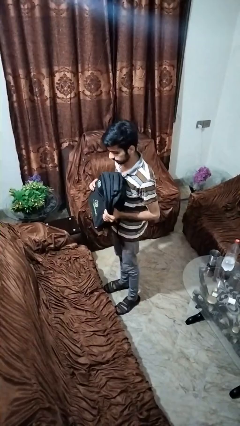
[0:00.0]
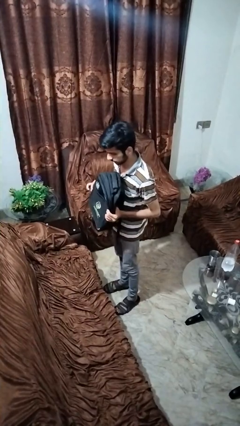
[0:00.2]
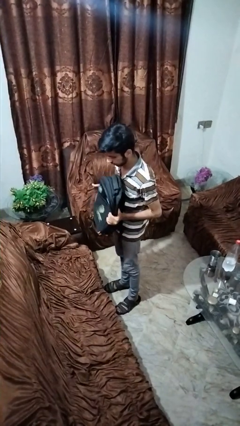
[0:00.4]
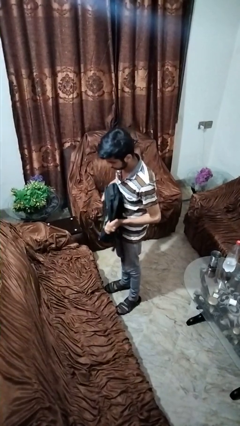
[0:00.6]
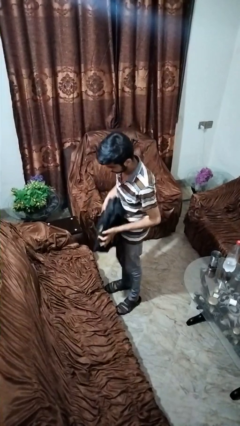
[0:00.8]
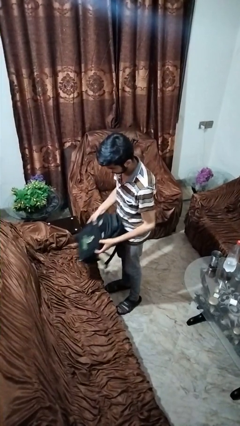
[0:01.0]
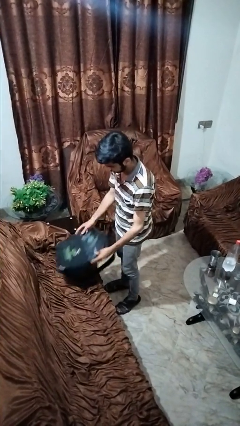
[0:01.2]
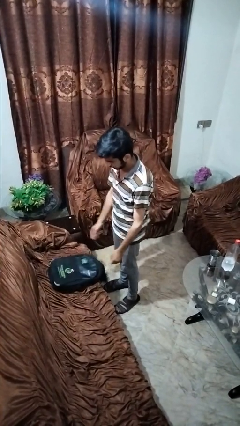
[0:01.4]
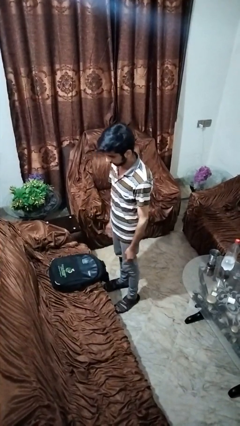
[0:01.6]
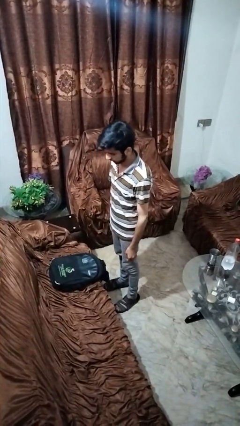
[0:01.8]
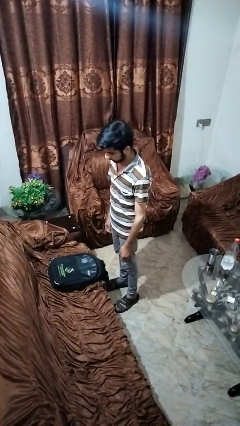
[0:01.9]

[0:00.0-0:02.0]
person puts down object on couch

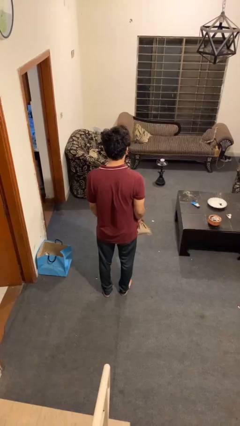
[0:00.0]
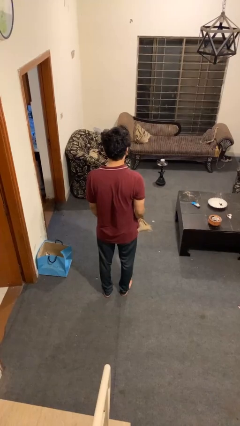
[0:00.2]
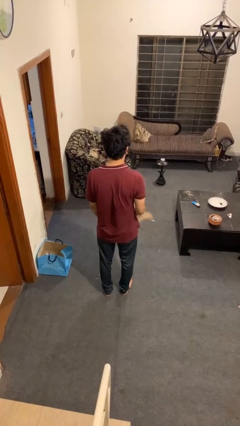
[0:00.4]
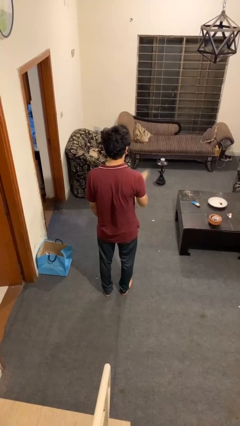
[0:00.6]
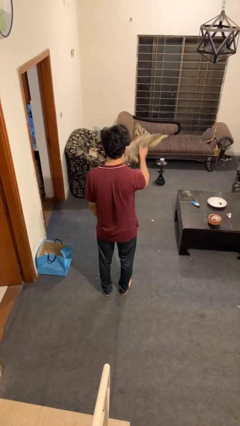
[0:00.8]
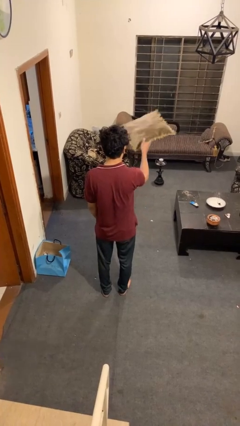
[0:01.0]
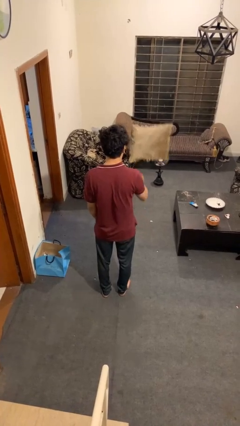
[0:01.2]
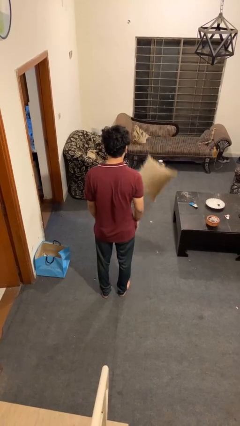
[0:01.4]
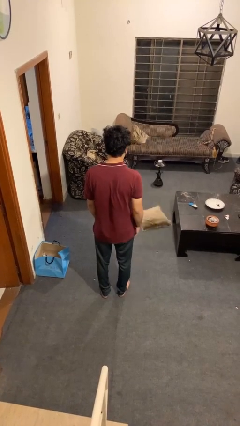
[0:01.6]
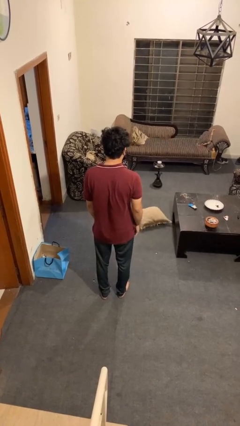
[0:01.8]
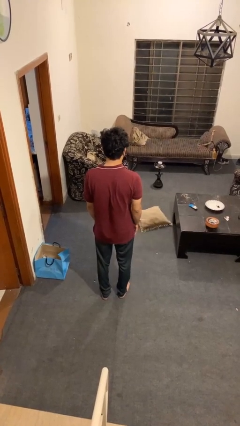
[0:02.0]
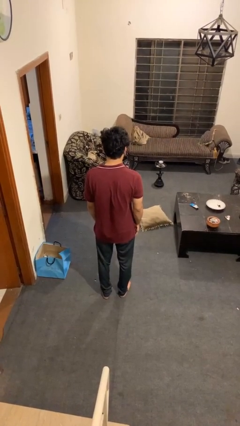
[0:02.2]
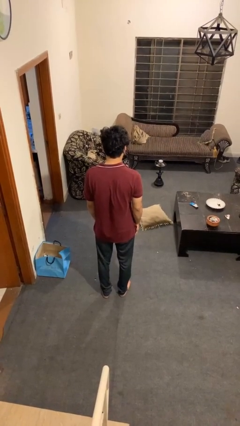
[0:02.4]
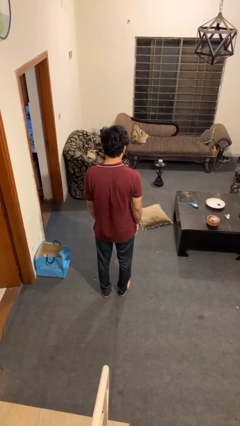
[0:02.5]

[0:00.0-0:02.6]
person throws object into air

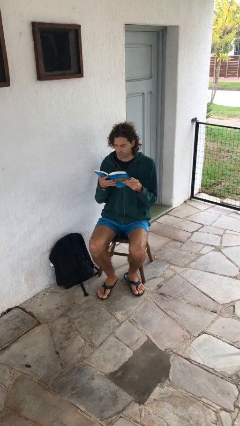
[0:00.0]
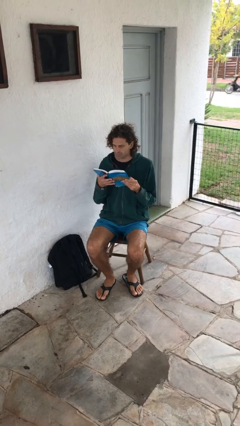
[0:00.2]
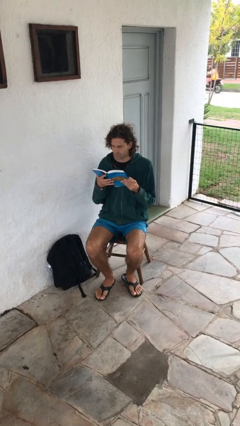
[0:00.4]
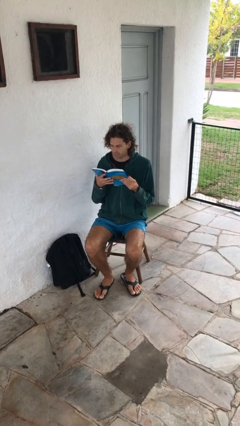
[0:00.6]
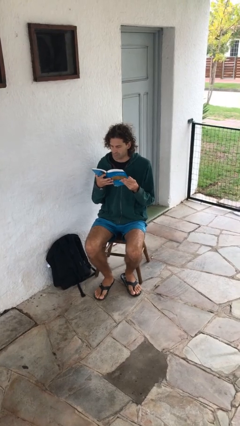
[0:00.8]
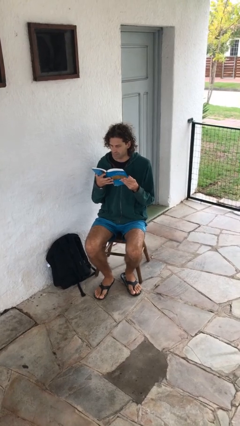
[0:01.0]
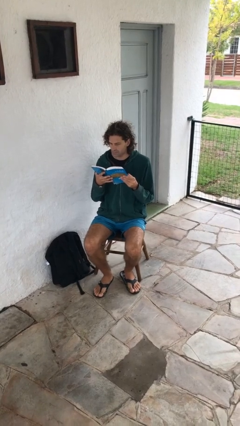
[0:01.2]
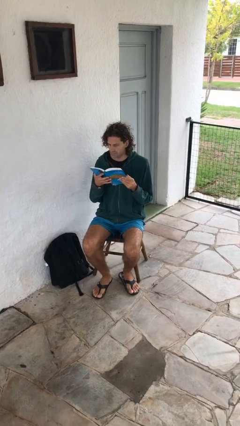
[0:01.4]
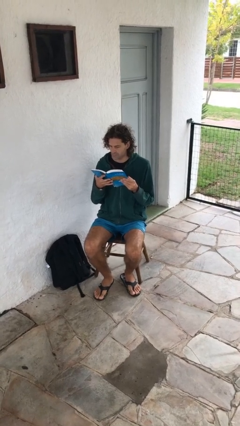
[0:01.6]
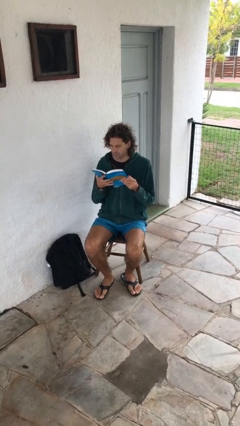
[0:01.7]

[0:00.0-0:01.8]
person reads document

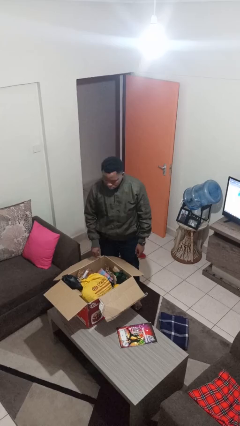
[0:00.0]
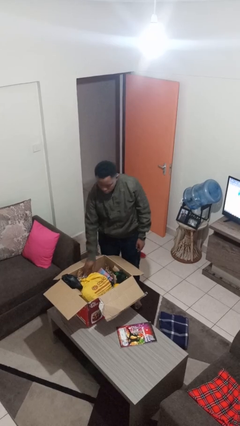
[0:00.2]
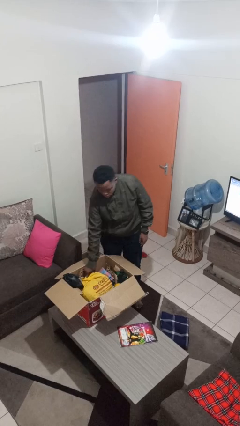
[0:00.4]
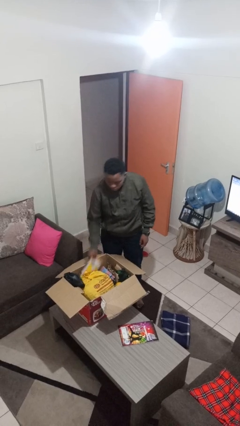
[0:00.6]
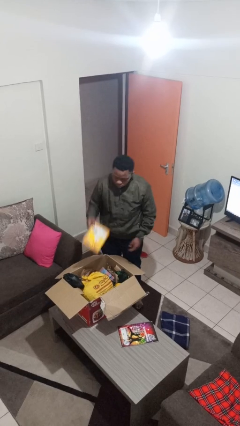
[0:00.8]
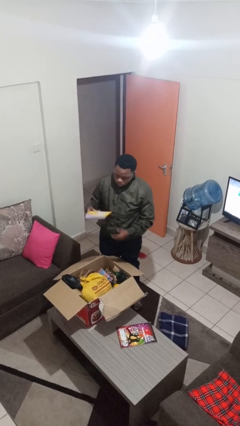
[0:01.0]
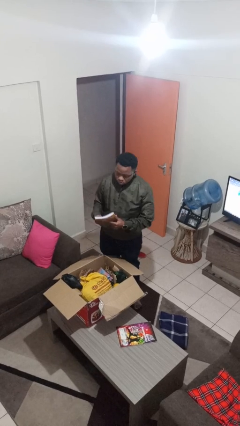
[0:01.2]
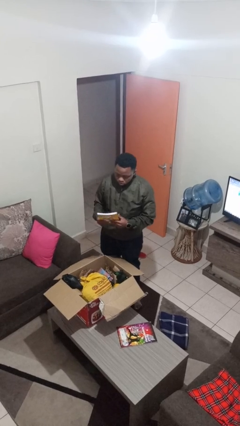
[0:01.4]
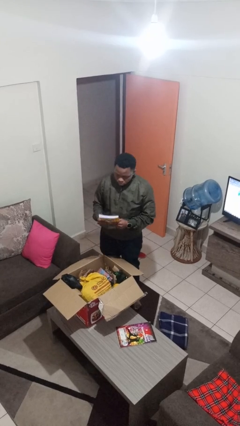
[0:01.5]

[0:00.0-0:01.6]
person takes object from box

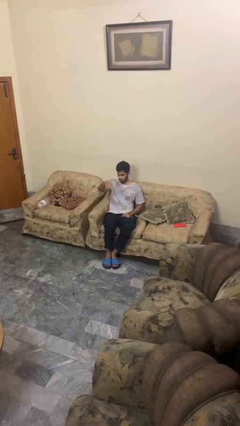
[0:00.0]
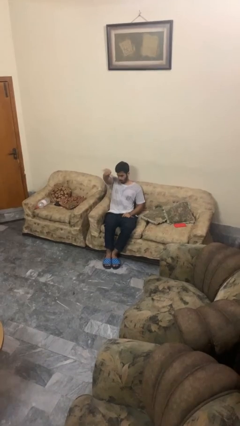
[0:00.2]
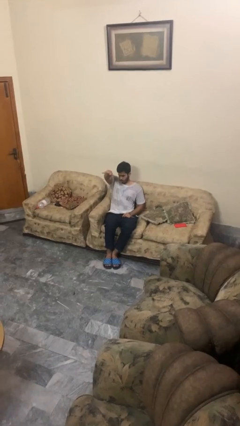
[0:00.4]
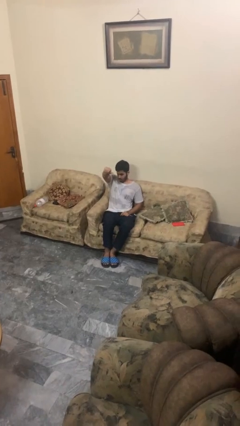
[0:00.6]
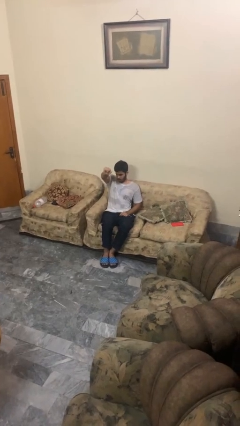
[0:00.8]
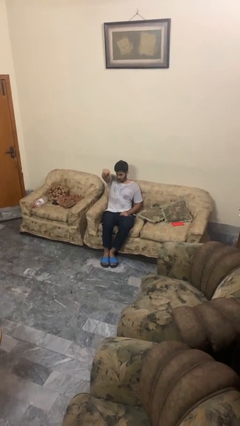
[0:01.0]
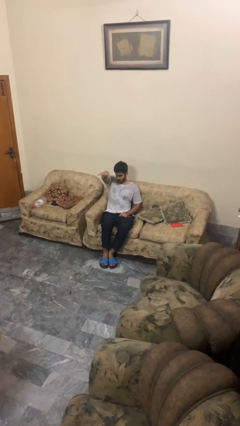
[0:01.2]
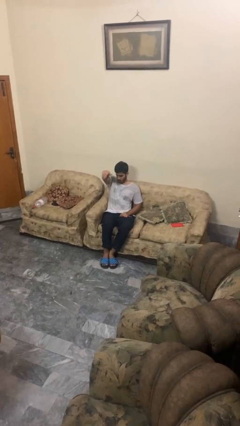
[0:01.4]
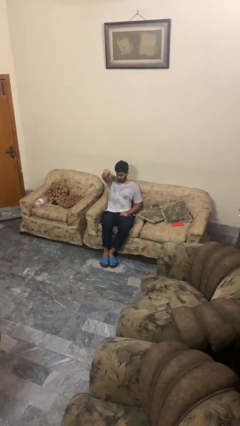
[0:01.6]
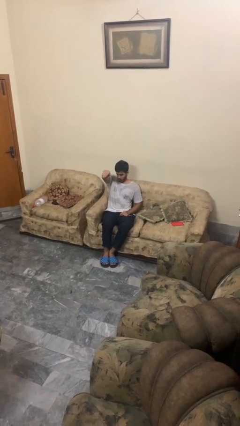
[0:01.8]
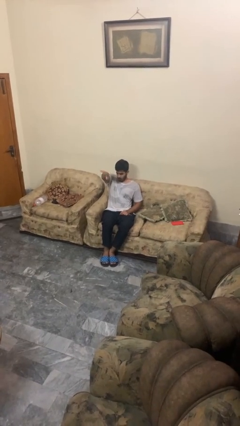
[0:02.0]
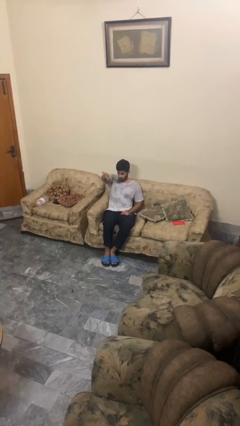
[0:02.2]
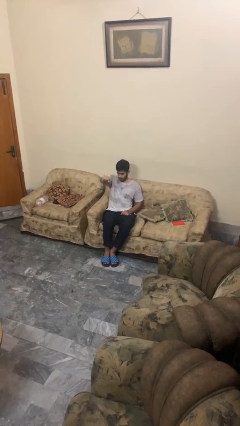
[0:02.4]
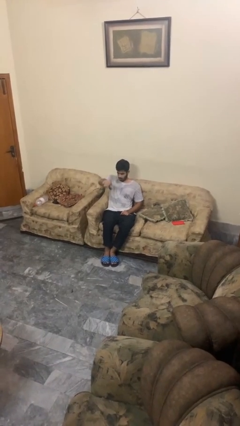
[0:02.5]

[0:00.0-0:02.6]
person gestures come here

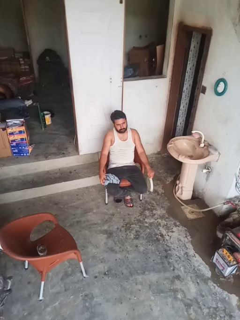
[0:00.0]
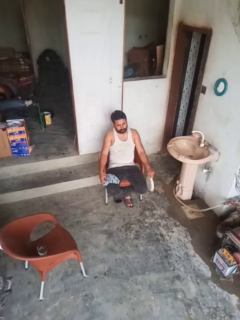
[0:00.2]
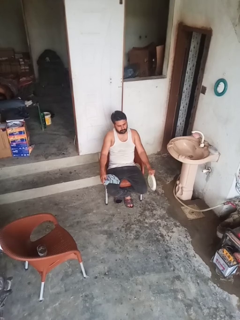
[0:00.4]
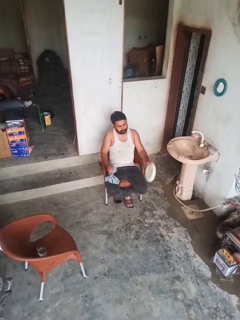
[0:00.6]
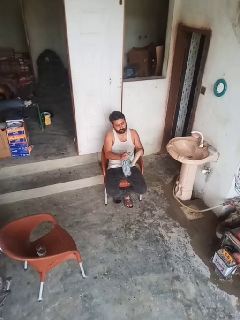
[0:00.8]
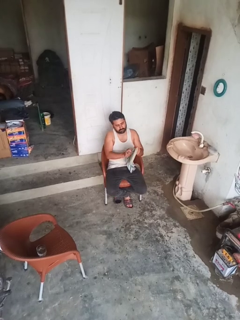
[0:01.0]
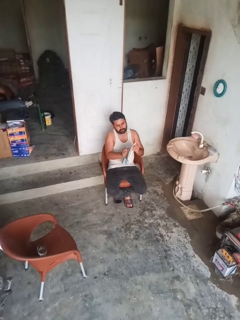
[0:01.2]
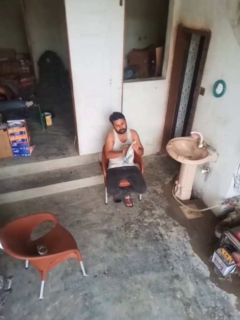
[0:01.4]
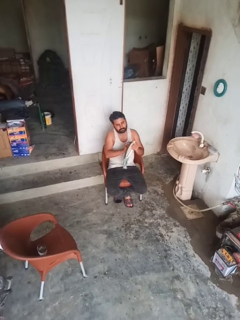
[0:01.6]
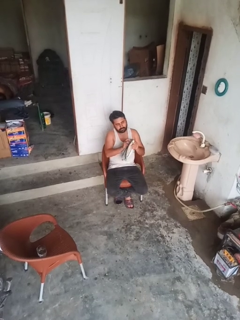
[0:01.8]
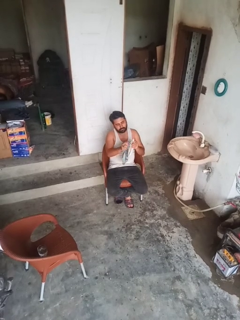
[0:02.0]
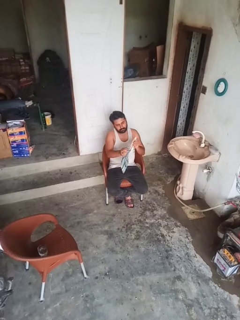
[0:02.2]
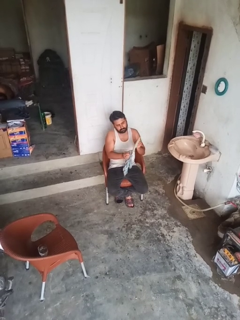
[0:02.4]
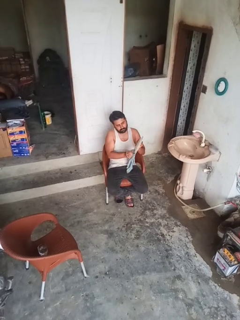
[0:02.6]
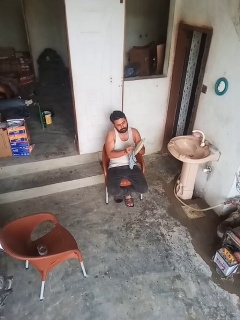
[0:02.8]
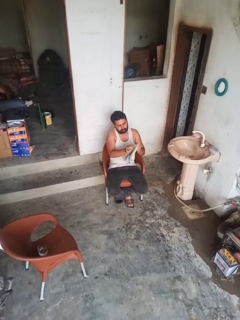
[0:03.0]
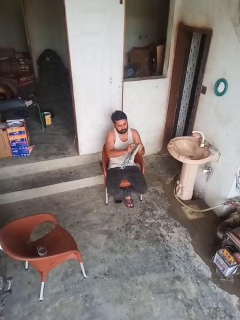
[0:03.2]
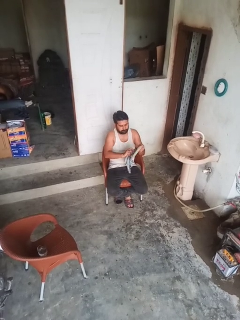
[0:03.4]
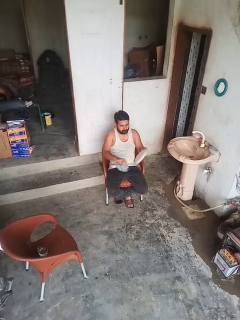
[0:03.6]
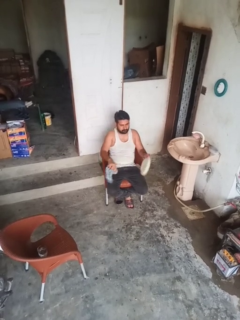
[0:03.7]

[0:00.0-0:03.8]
person dries dish

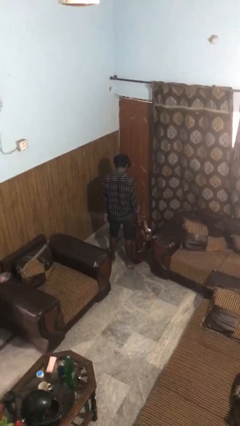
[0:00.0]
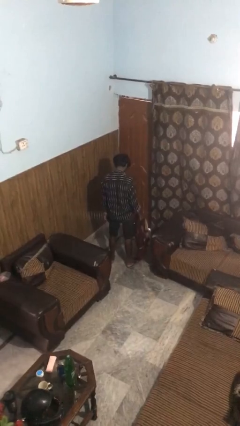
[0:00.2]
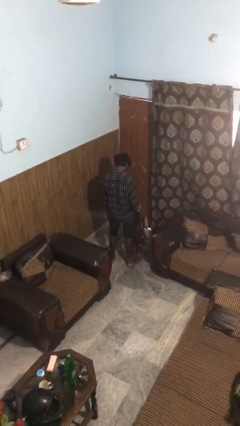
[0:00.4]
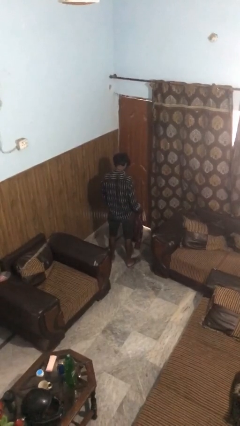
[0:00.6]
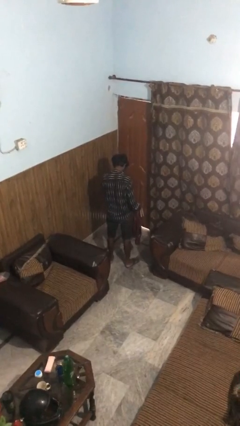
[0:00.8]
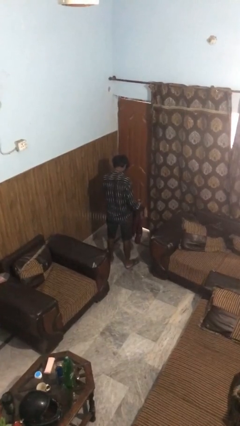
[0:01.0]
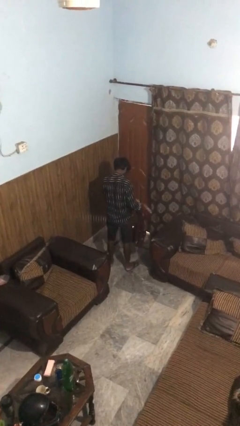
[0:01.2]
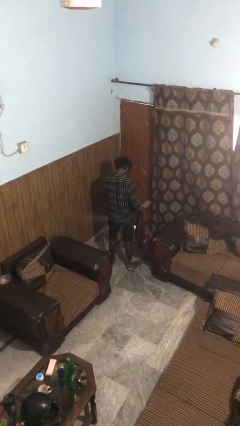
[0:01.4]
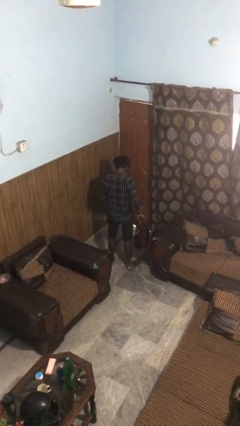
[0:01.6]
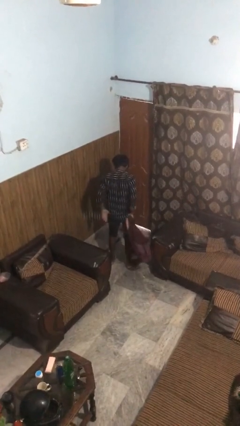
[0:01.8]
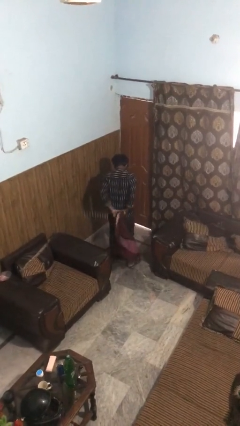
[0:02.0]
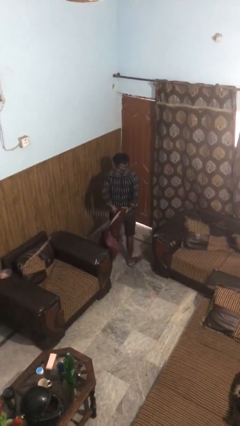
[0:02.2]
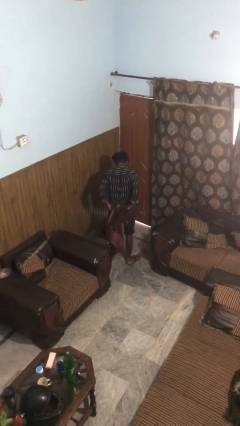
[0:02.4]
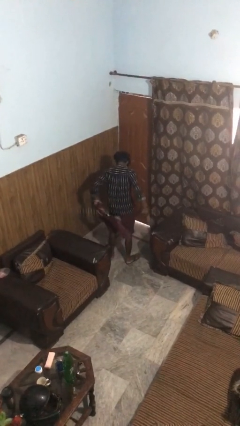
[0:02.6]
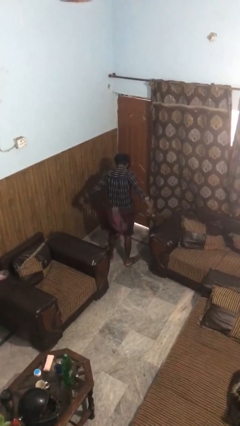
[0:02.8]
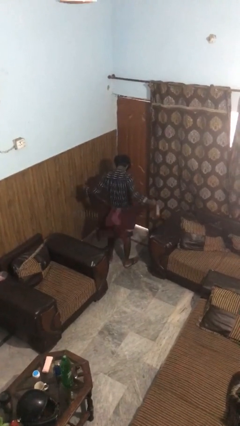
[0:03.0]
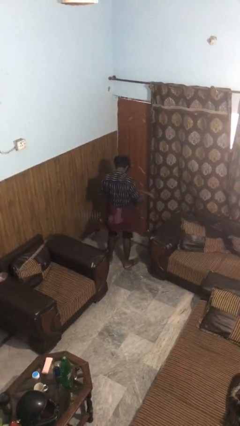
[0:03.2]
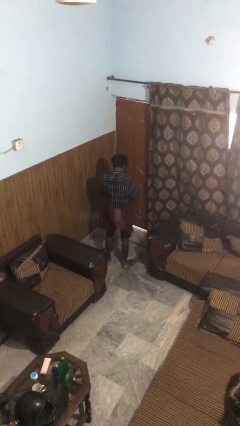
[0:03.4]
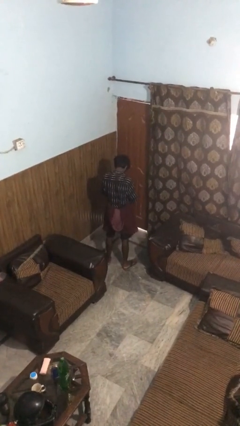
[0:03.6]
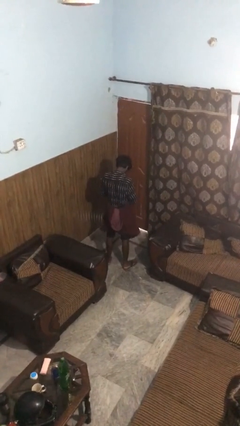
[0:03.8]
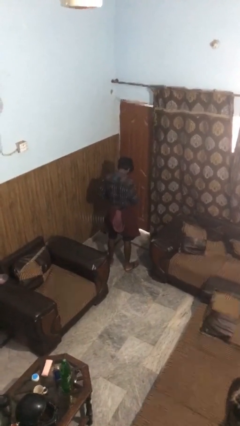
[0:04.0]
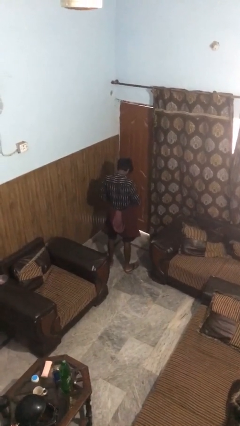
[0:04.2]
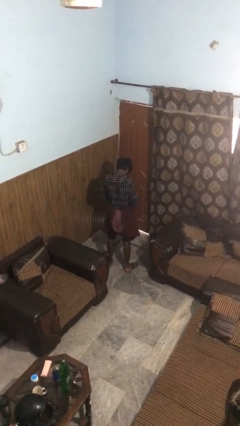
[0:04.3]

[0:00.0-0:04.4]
person ties jacket around waist
